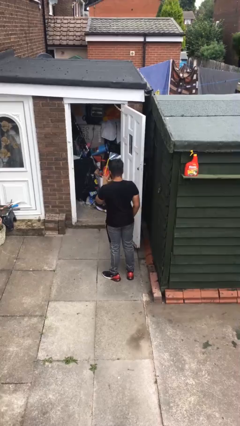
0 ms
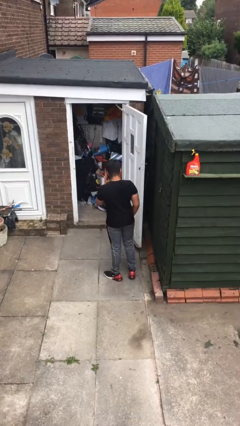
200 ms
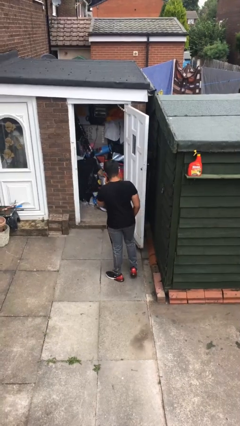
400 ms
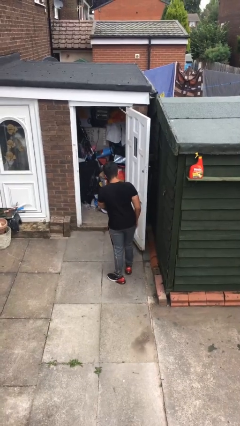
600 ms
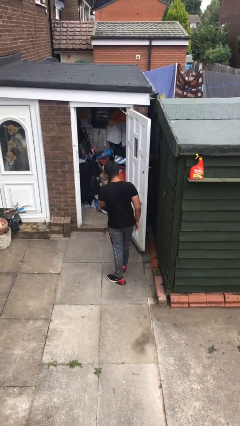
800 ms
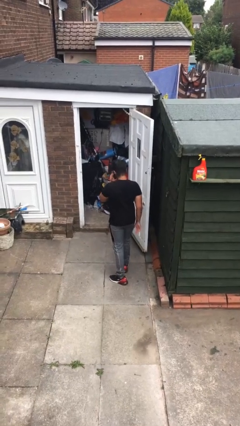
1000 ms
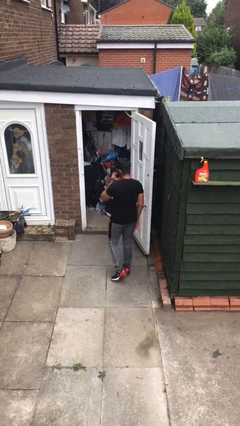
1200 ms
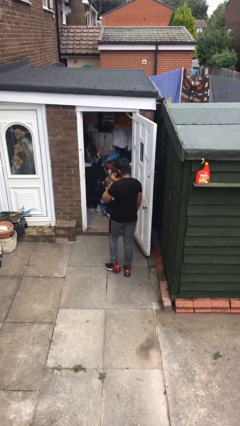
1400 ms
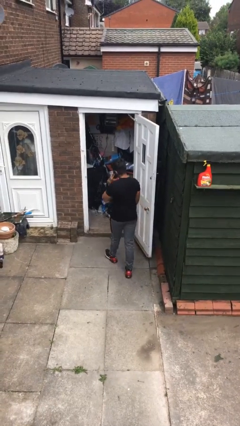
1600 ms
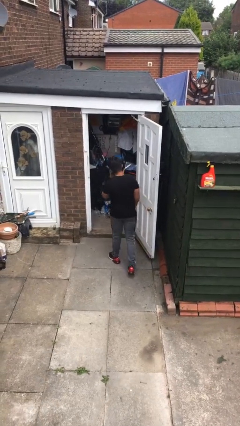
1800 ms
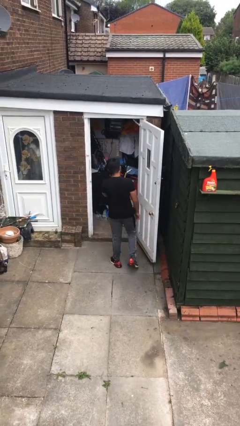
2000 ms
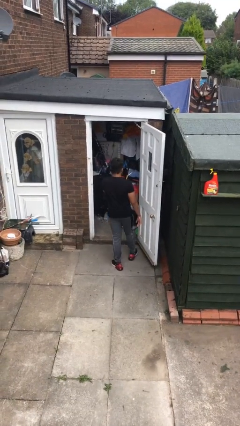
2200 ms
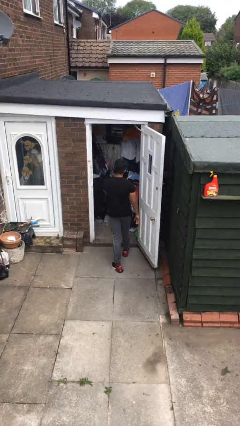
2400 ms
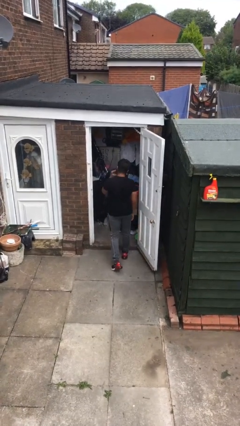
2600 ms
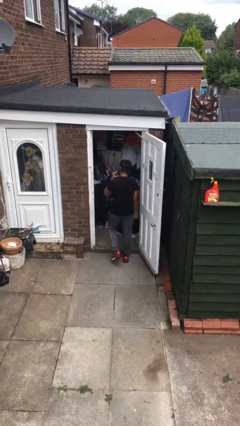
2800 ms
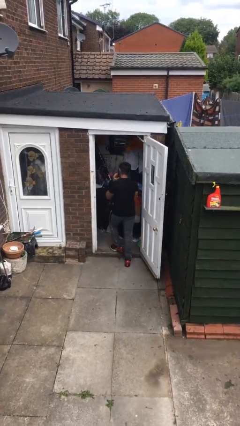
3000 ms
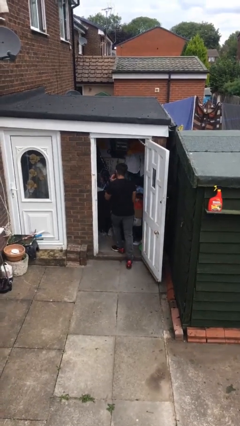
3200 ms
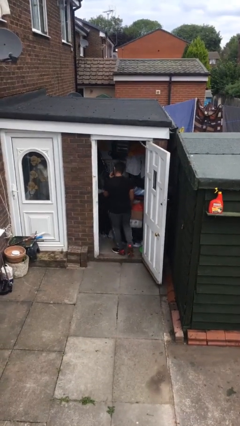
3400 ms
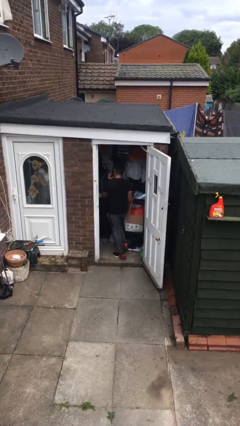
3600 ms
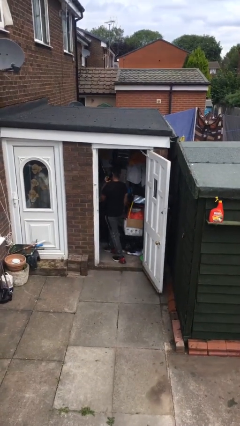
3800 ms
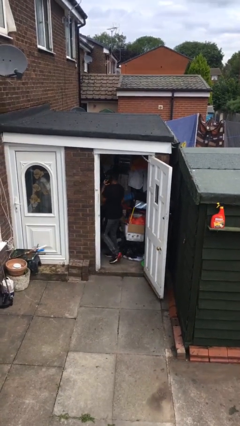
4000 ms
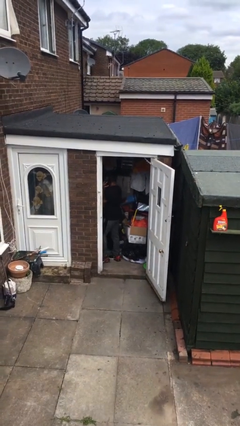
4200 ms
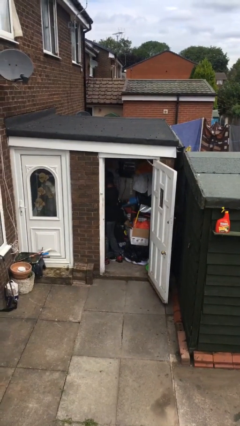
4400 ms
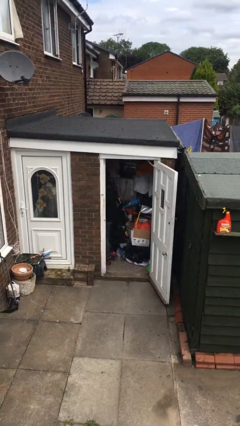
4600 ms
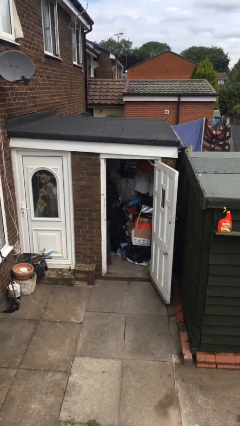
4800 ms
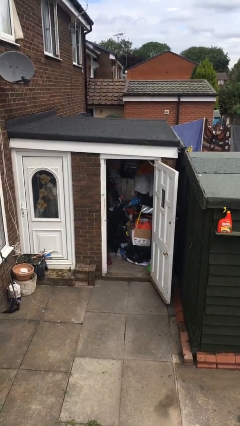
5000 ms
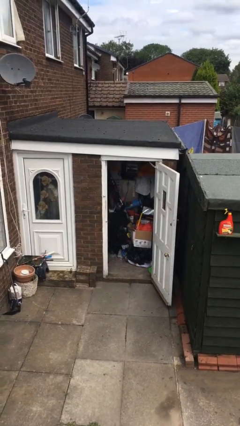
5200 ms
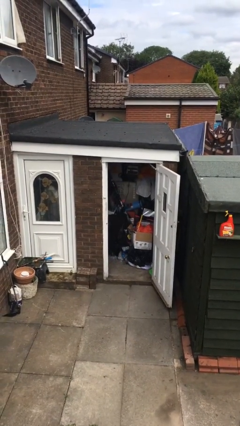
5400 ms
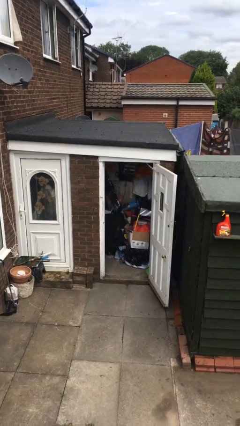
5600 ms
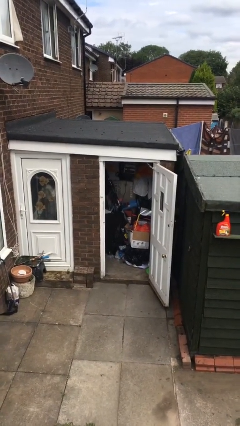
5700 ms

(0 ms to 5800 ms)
person exits scene through structure

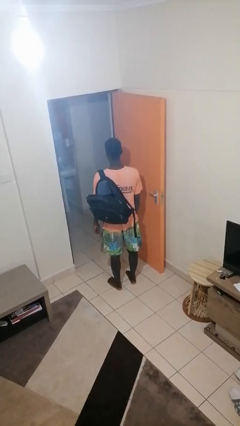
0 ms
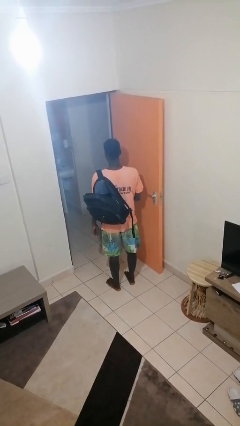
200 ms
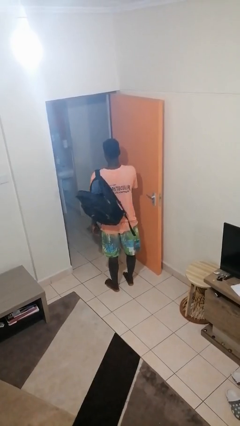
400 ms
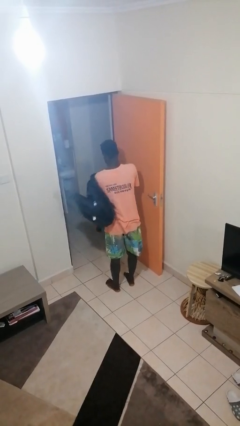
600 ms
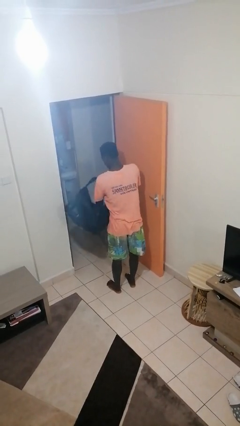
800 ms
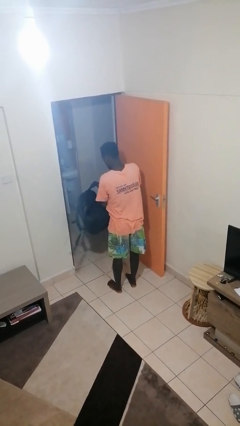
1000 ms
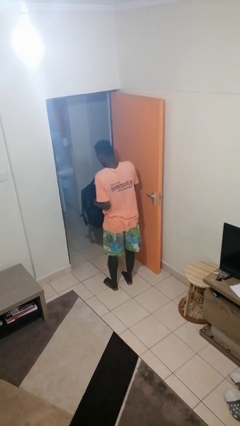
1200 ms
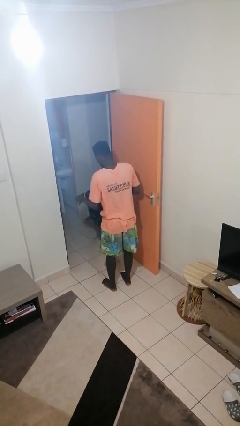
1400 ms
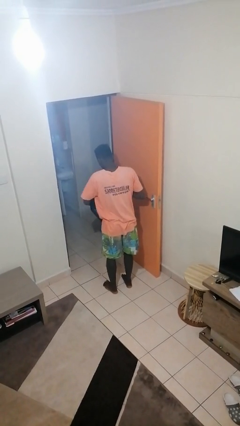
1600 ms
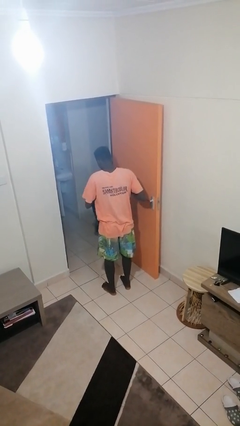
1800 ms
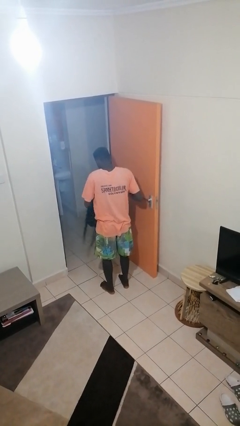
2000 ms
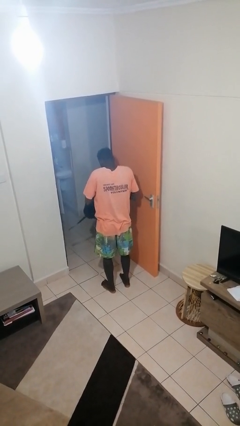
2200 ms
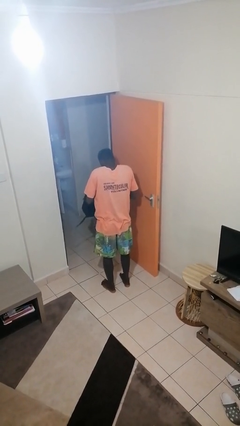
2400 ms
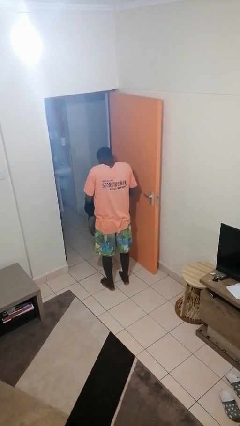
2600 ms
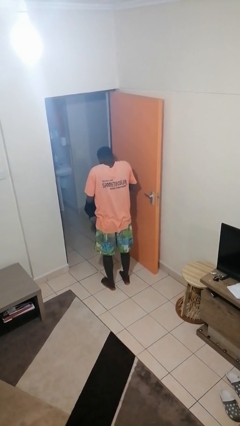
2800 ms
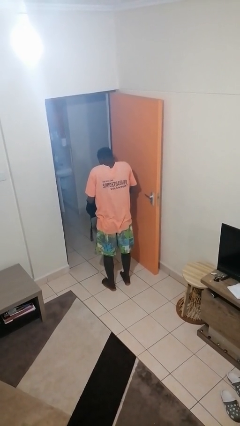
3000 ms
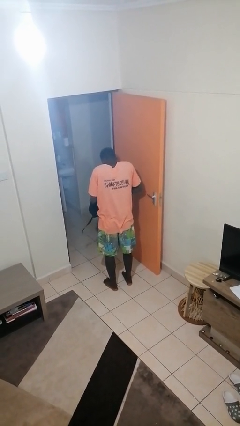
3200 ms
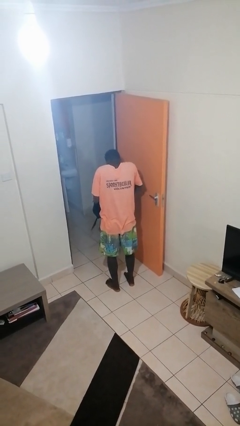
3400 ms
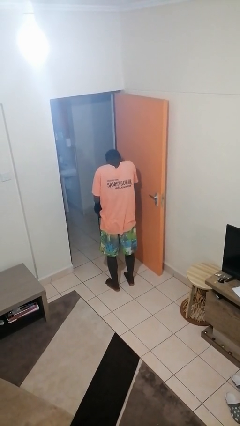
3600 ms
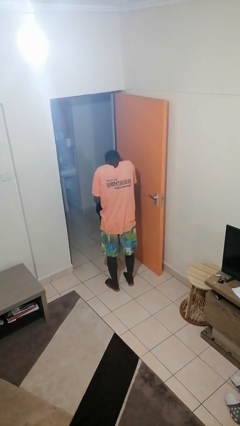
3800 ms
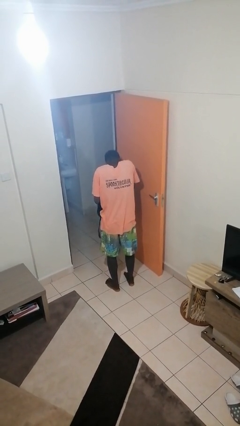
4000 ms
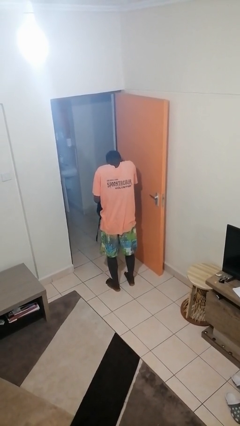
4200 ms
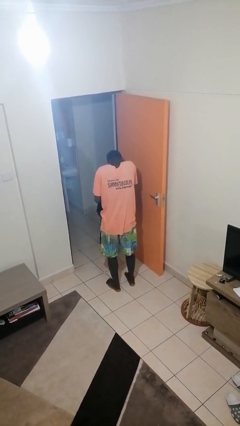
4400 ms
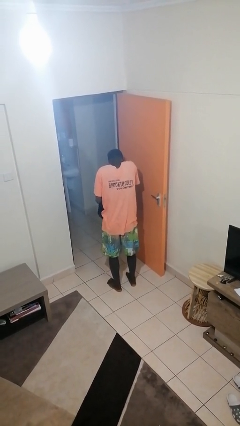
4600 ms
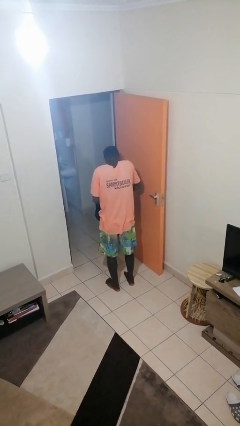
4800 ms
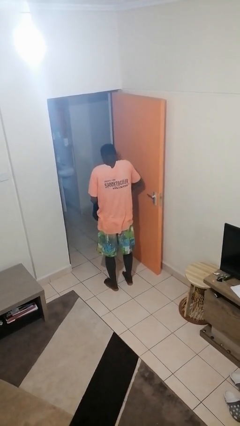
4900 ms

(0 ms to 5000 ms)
person searches in backpack

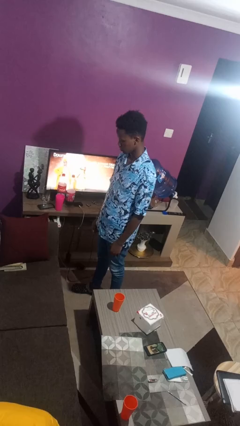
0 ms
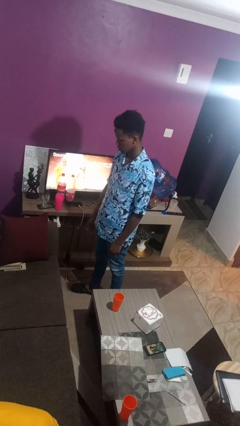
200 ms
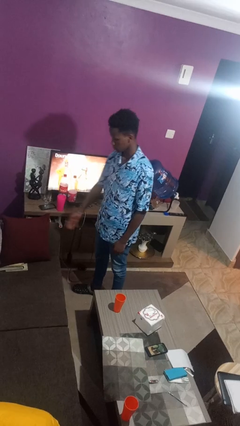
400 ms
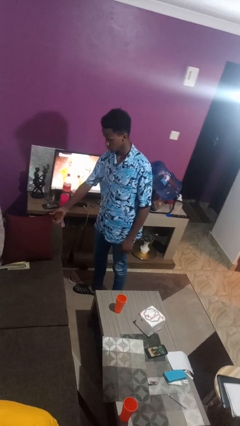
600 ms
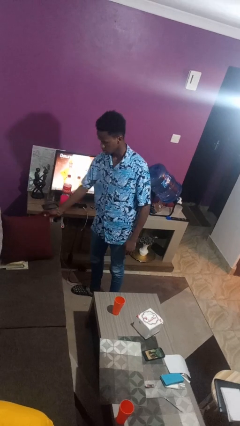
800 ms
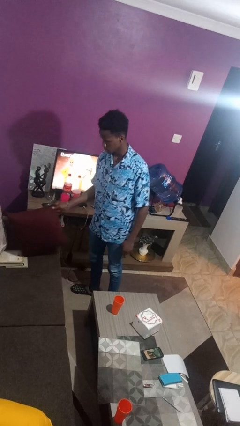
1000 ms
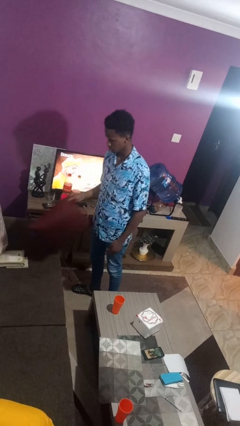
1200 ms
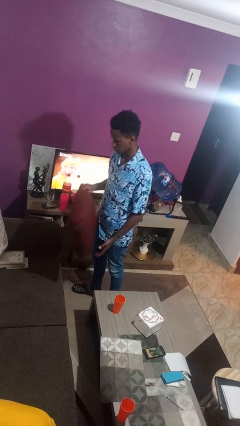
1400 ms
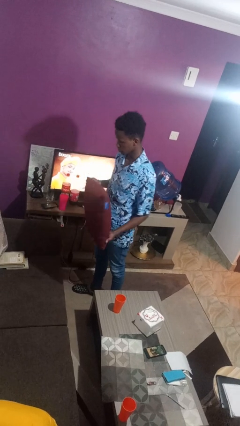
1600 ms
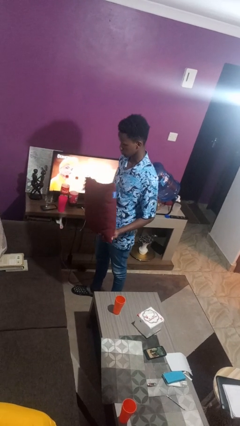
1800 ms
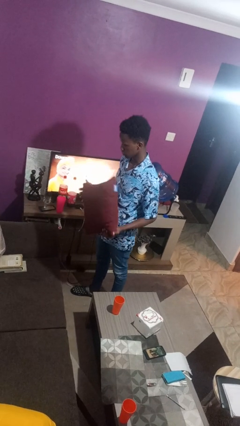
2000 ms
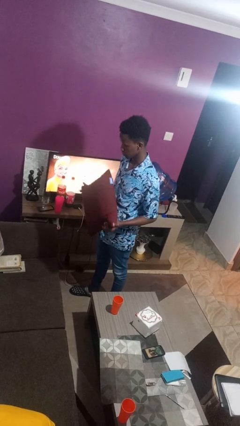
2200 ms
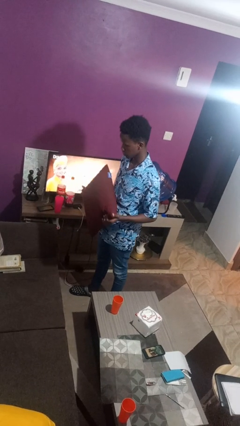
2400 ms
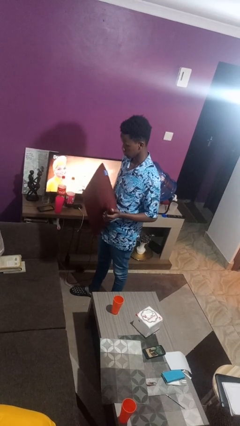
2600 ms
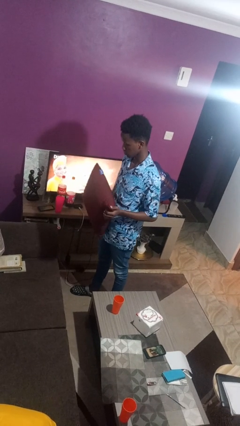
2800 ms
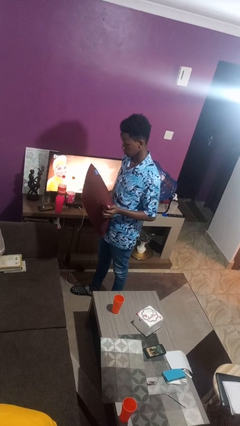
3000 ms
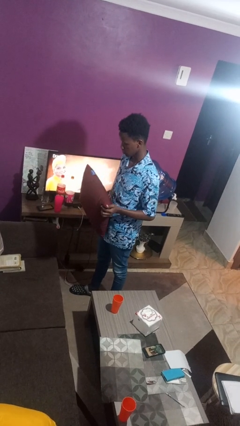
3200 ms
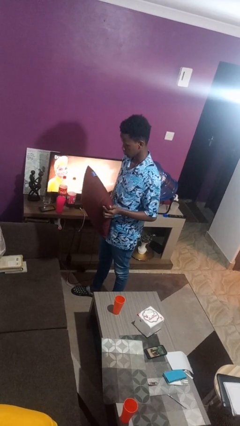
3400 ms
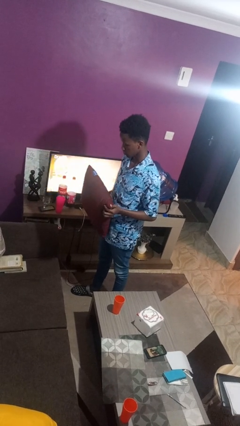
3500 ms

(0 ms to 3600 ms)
person picks up object from couch

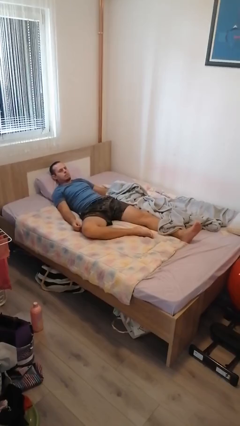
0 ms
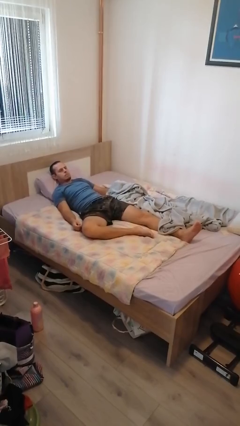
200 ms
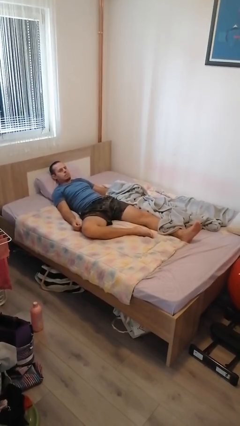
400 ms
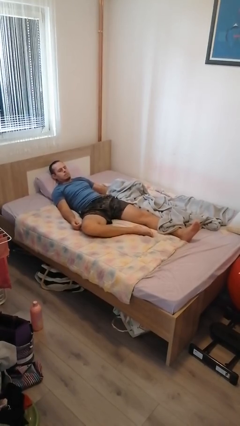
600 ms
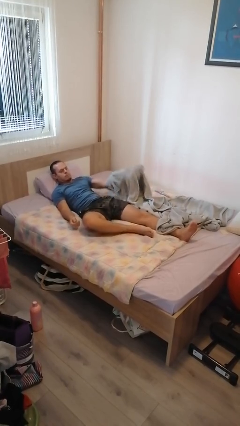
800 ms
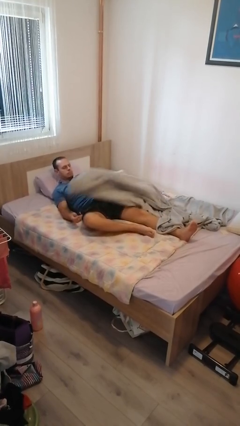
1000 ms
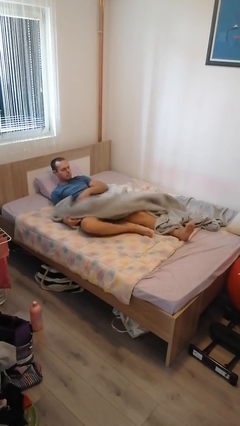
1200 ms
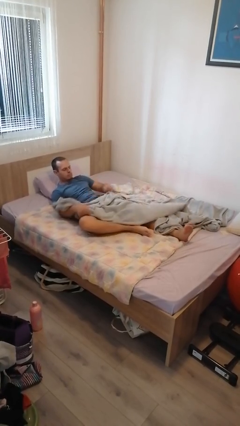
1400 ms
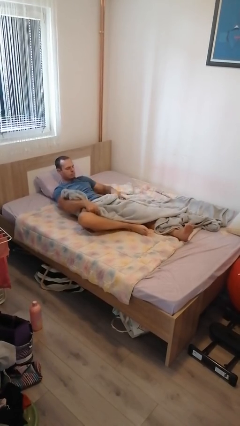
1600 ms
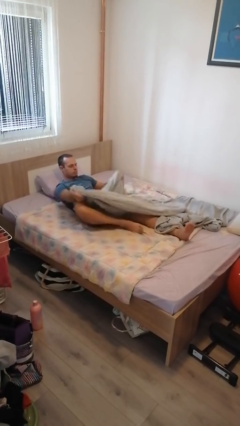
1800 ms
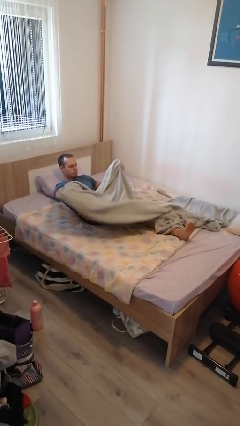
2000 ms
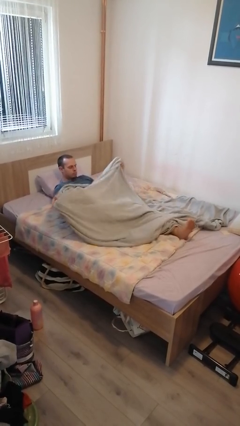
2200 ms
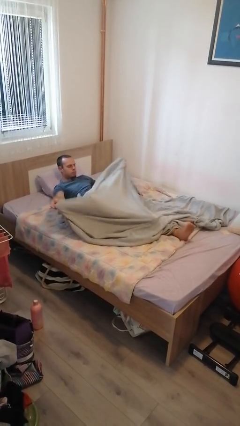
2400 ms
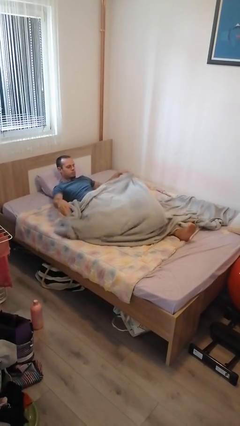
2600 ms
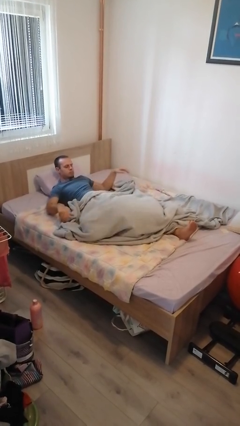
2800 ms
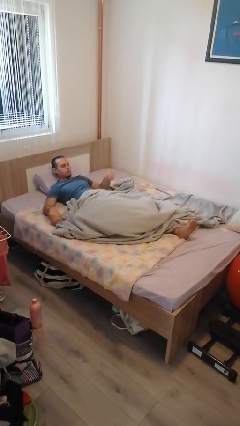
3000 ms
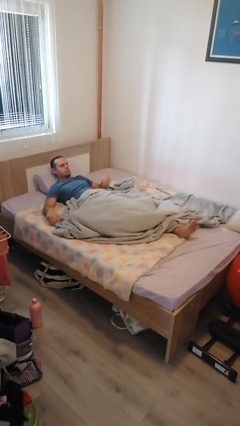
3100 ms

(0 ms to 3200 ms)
person covers with bedsheets
